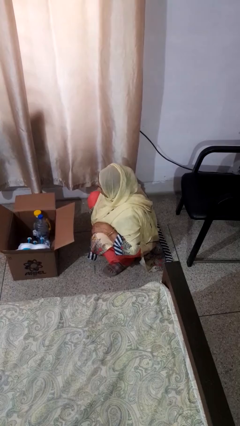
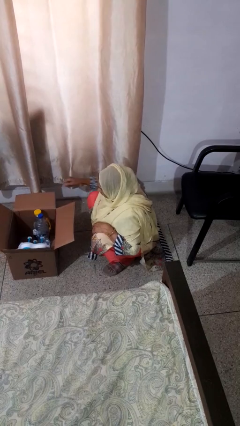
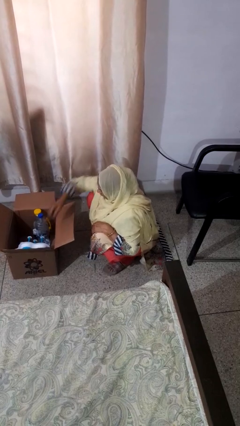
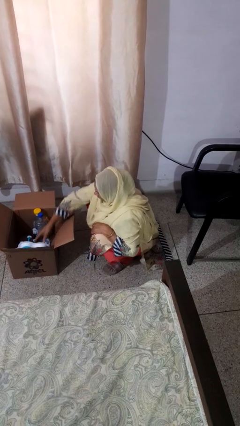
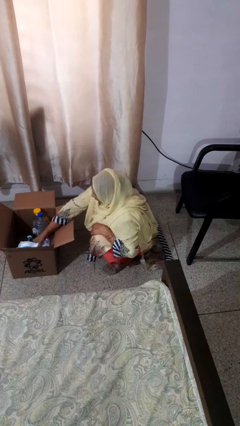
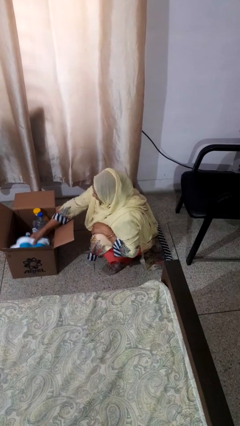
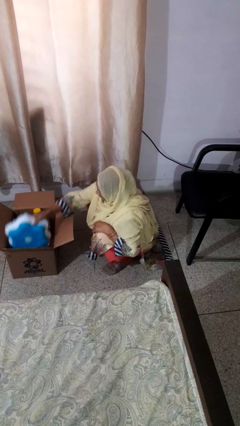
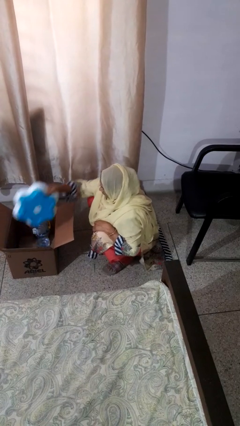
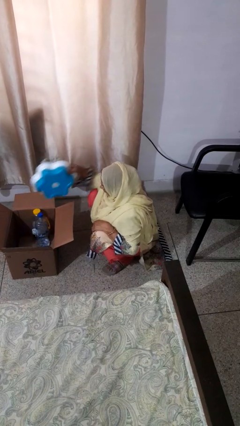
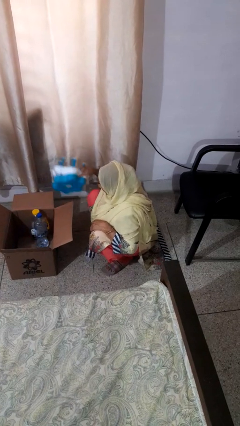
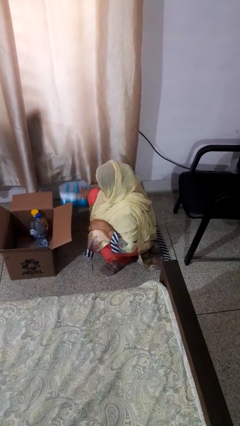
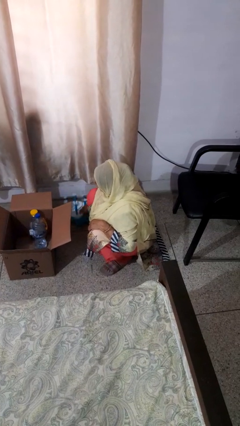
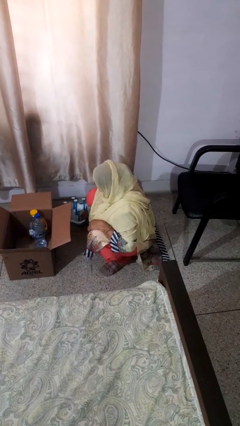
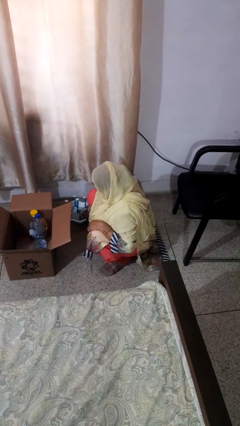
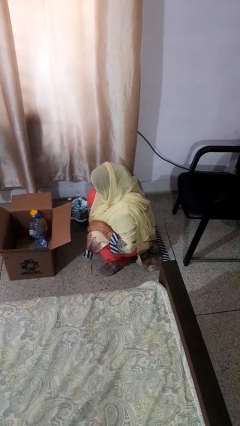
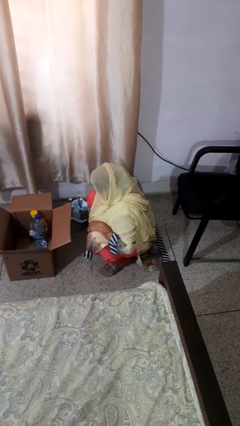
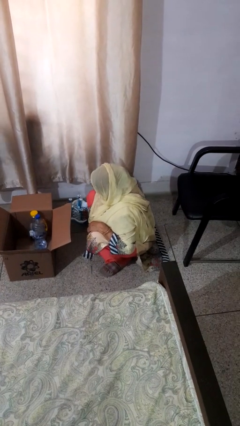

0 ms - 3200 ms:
person takes object from box

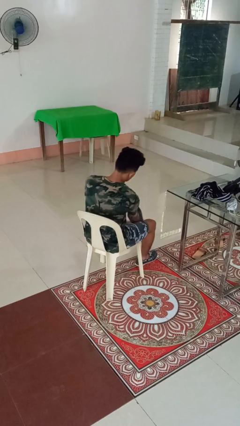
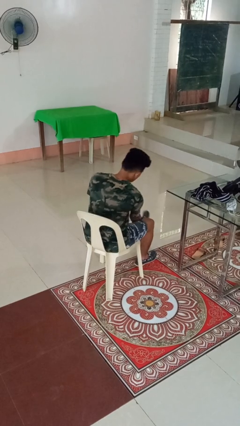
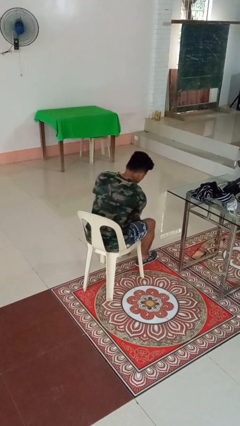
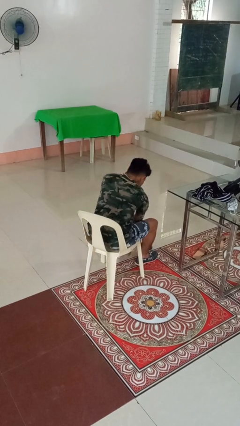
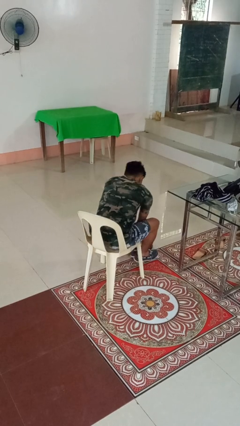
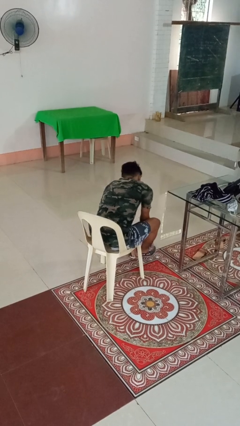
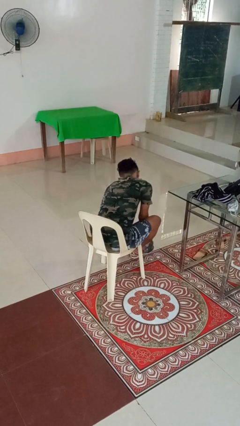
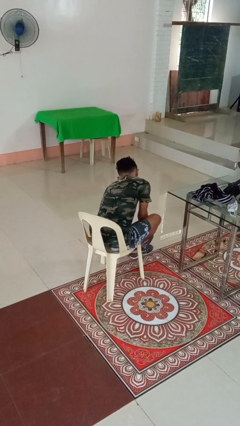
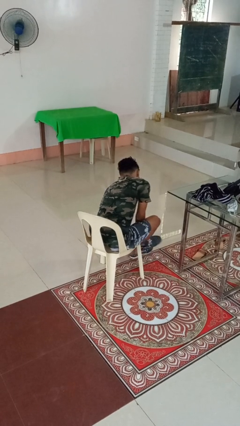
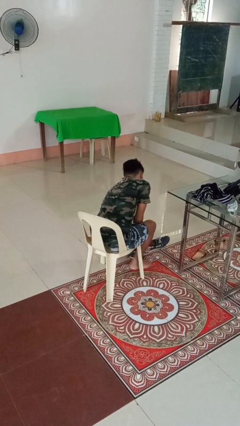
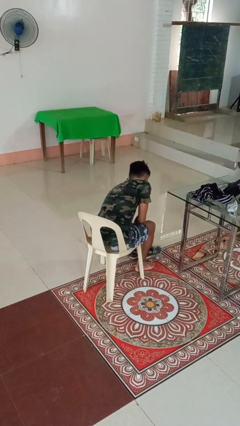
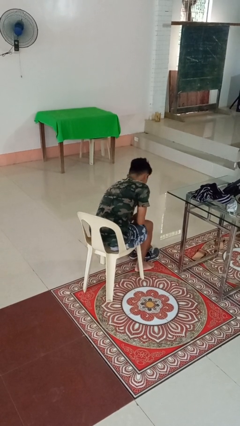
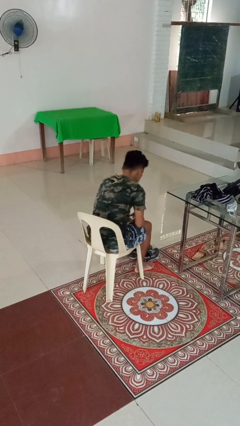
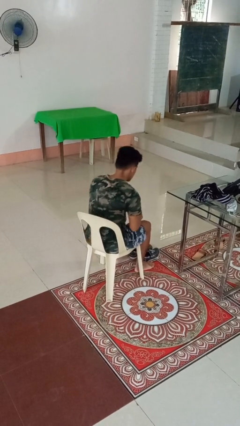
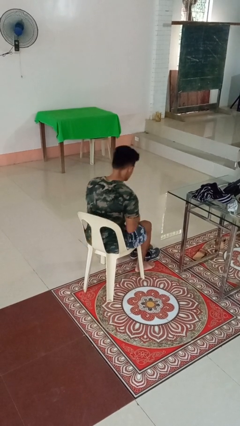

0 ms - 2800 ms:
person takes off shoes

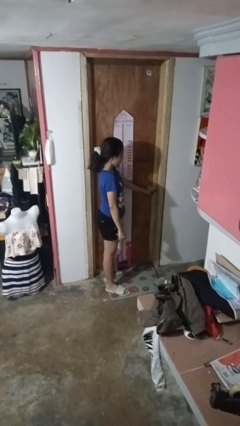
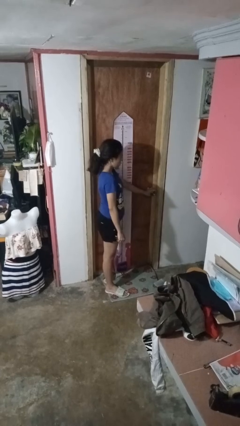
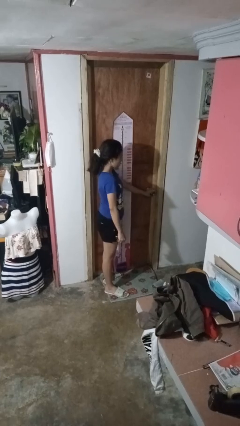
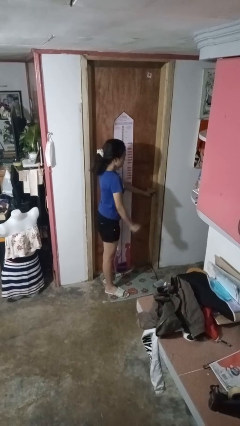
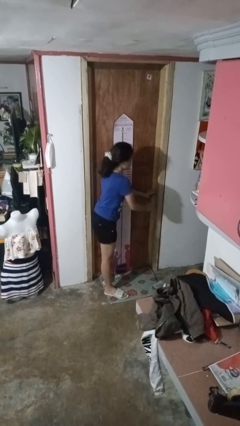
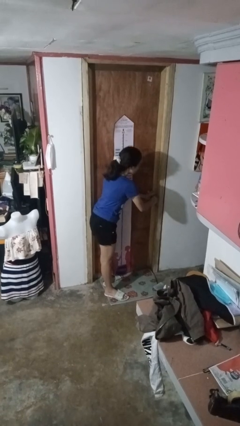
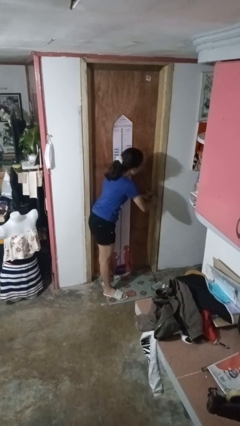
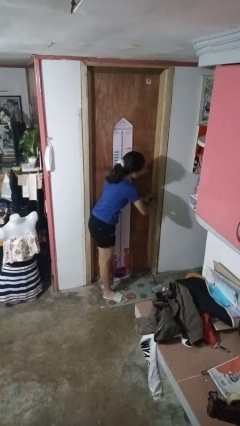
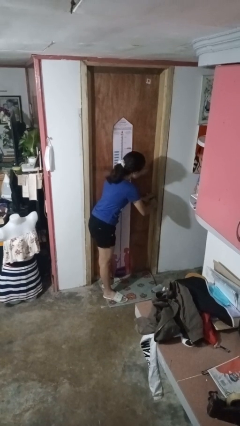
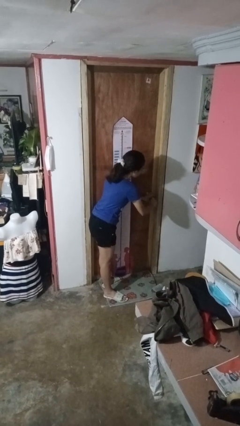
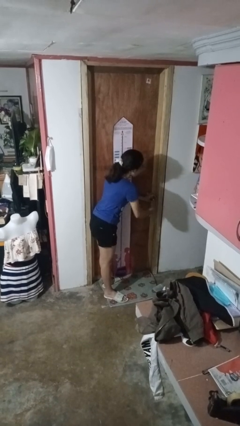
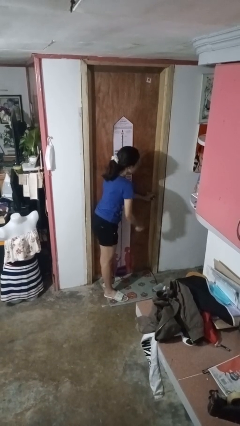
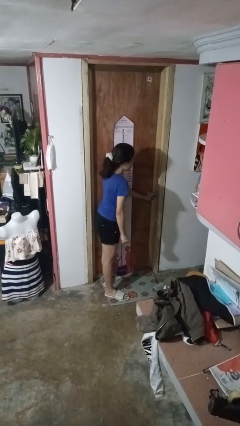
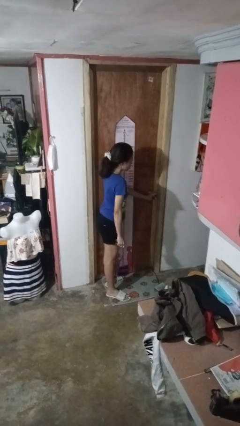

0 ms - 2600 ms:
person locks door with keys

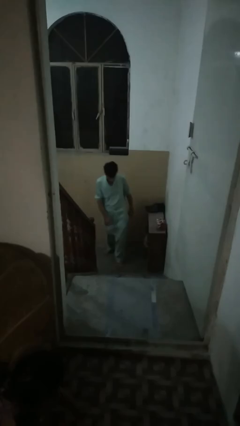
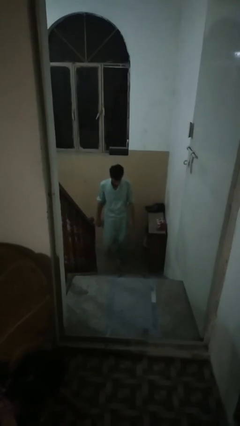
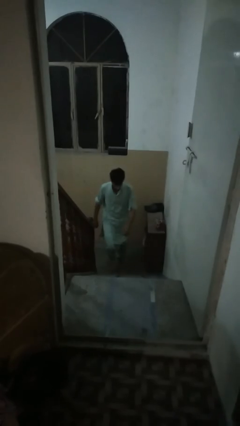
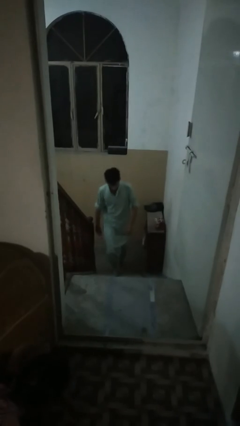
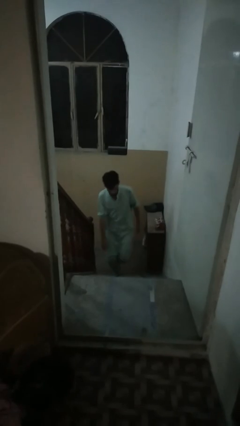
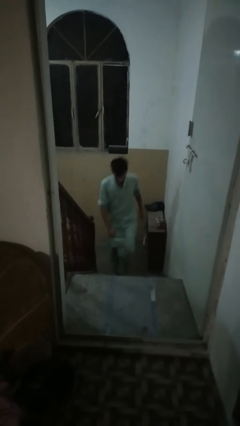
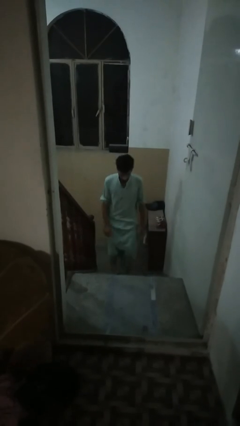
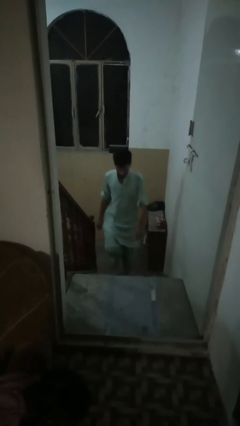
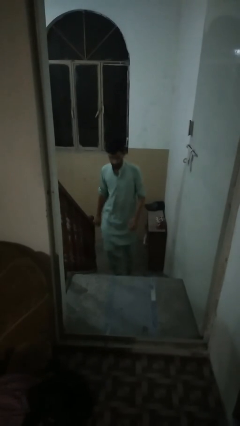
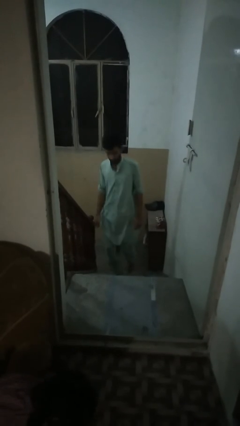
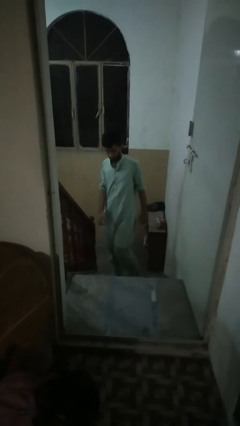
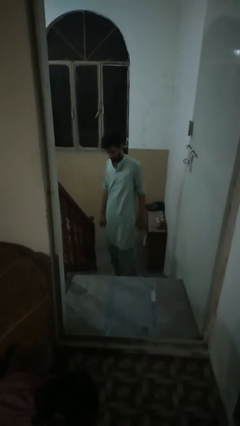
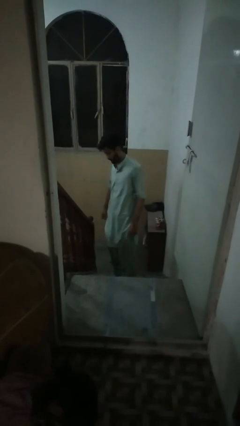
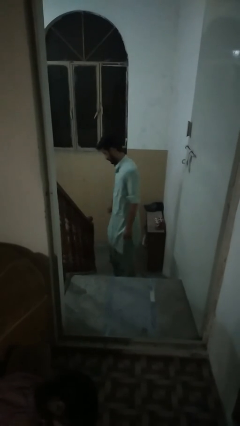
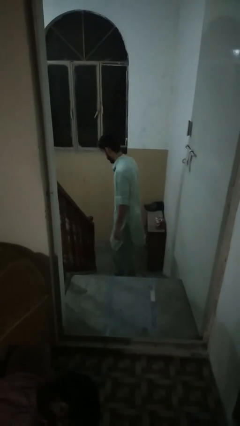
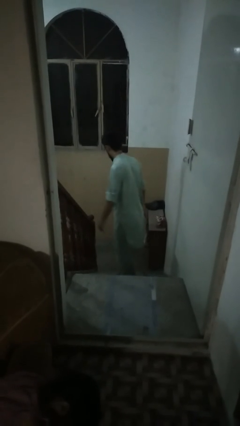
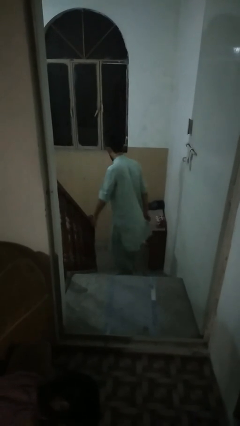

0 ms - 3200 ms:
person climbs up stairs

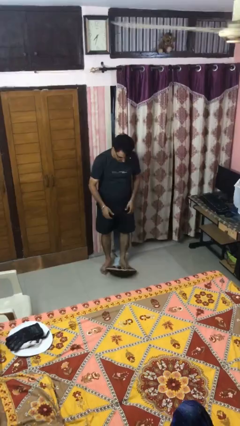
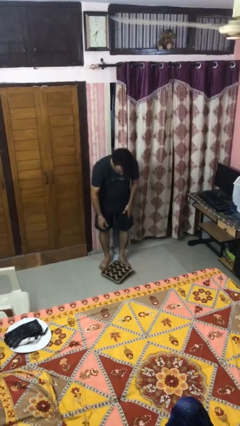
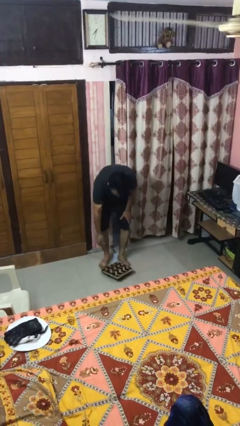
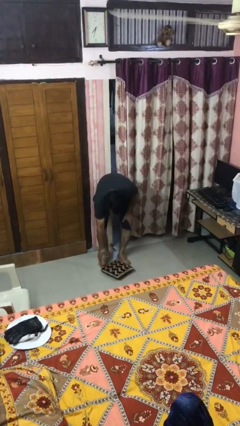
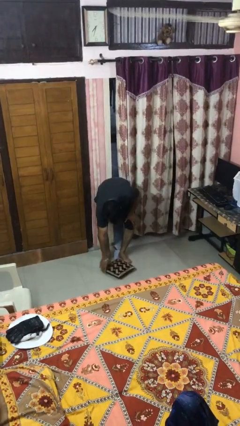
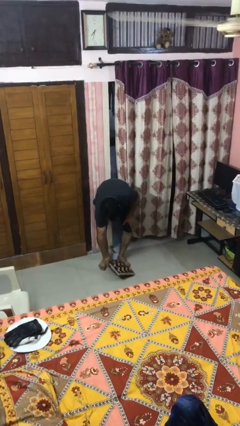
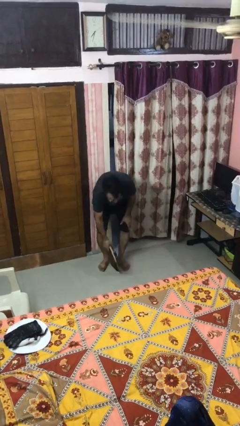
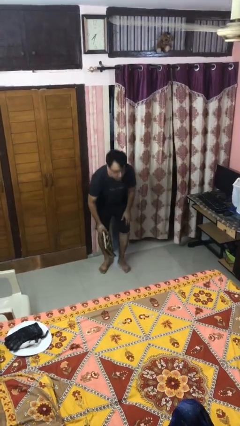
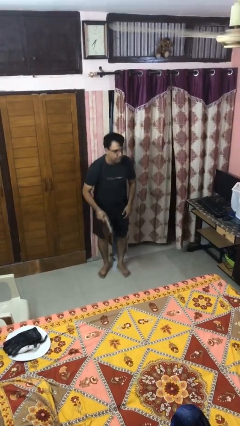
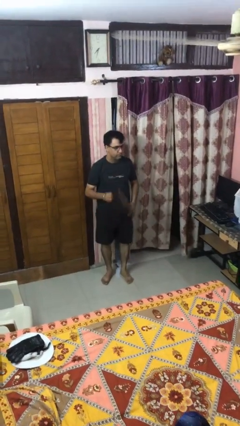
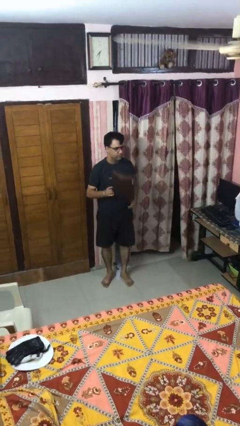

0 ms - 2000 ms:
person picks up object from floor

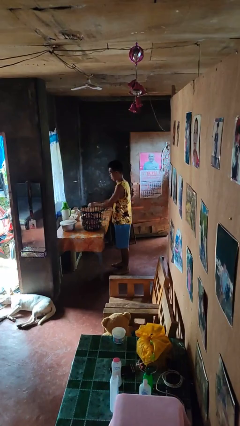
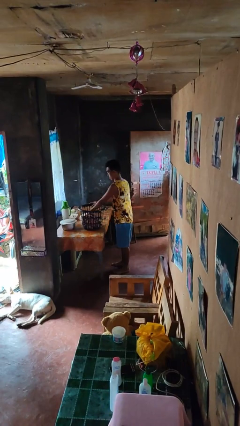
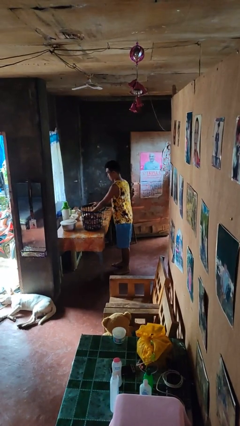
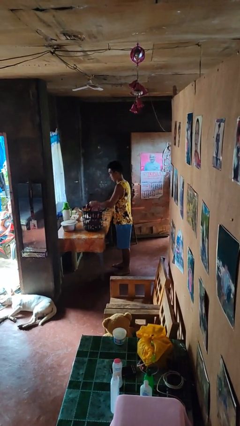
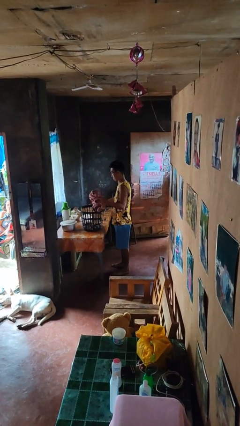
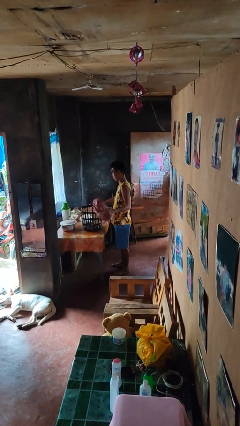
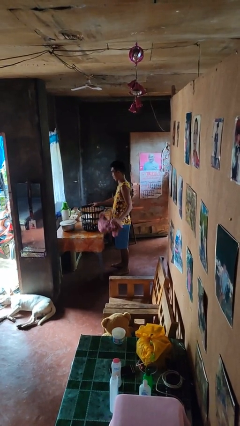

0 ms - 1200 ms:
person takes object from basket

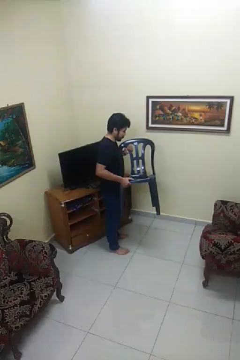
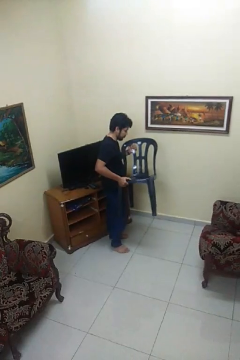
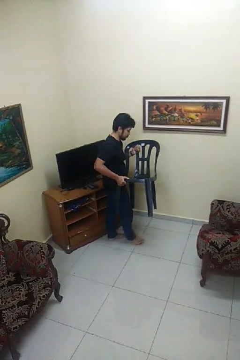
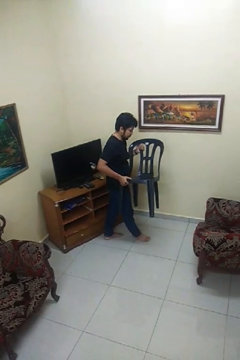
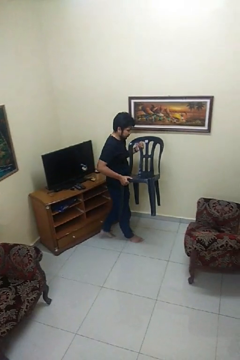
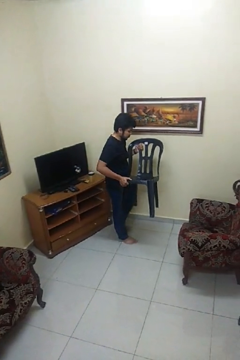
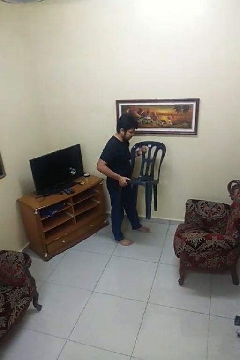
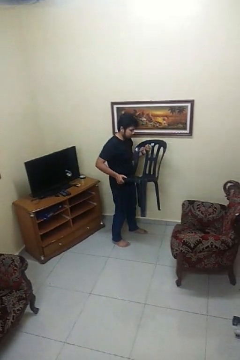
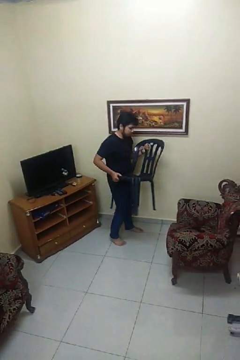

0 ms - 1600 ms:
person carries furniture

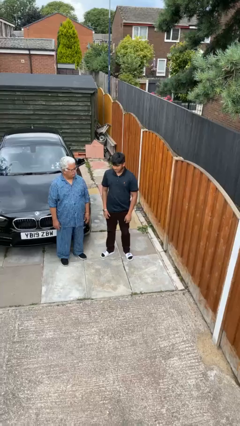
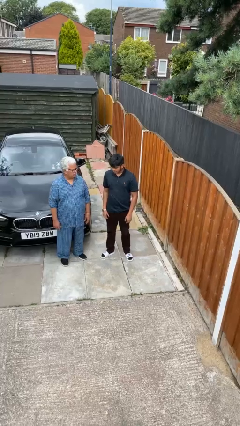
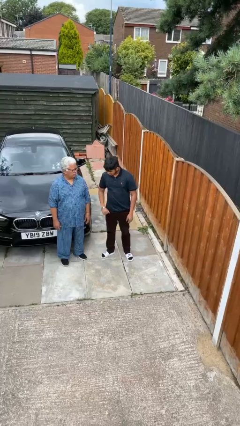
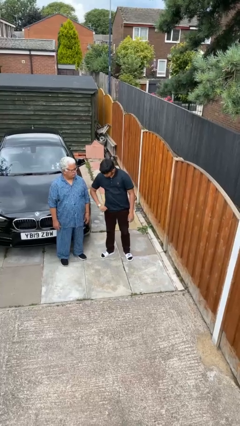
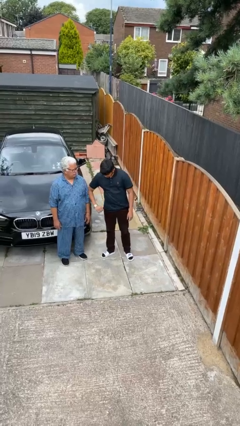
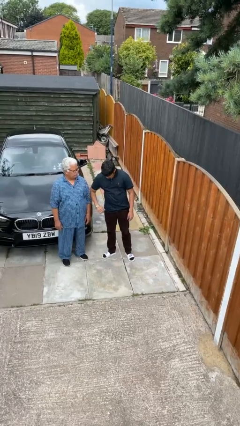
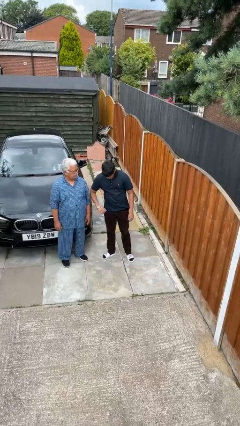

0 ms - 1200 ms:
person nudges person with elbow
